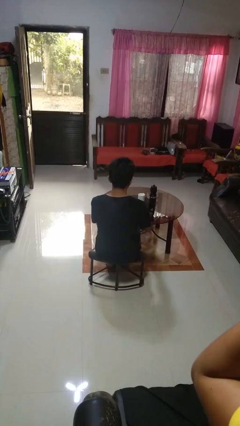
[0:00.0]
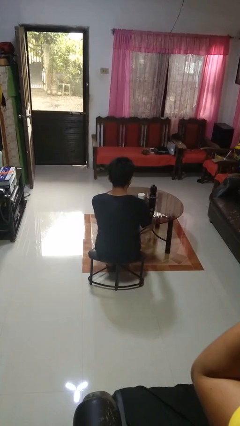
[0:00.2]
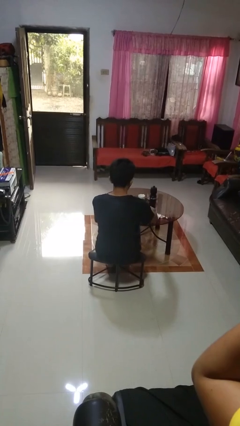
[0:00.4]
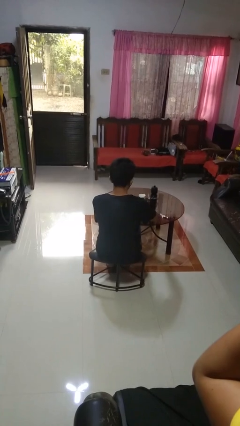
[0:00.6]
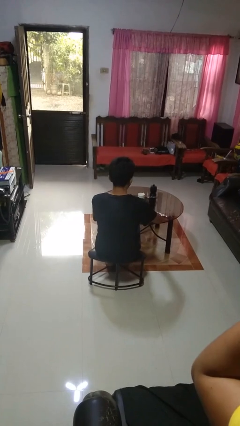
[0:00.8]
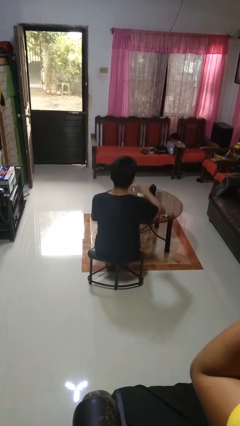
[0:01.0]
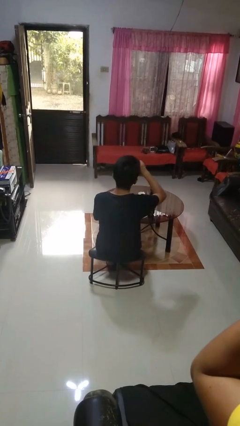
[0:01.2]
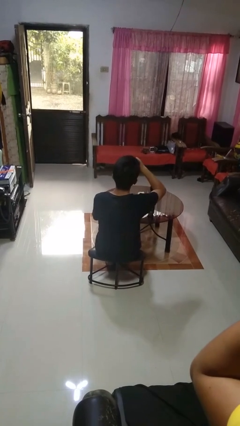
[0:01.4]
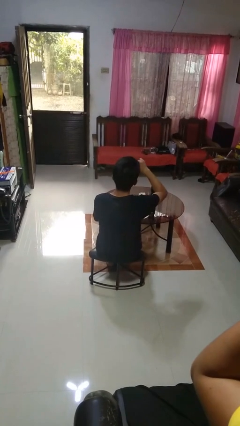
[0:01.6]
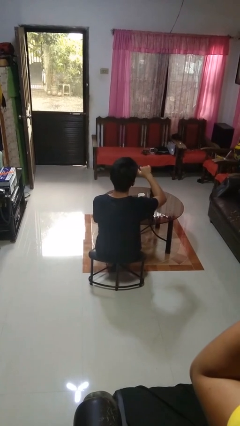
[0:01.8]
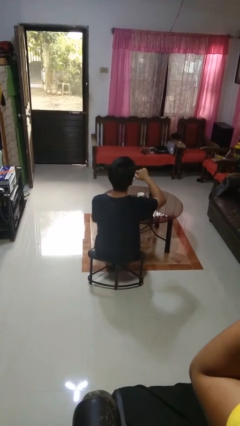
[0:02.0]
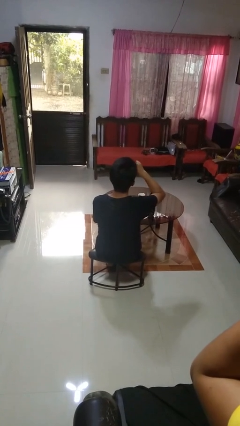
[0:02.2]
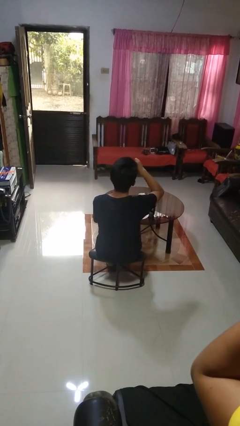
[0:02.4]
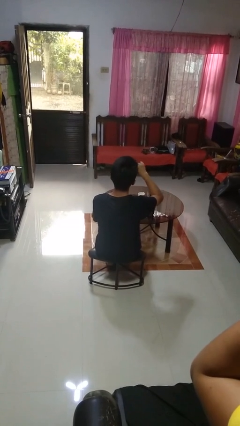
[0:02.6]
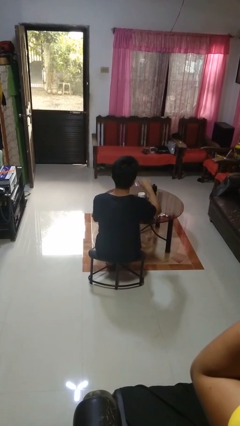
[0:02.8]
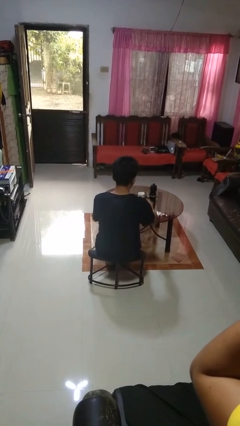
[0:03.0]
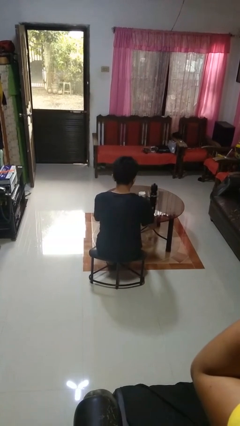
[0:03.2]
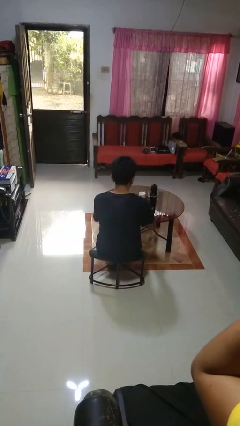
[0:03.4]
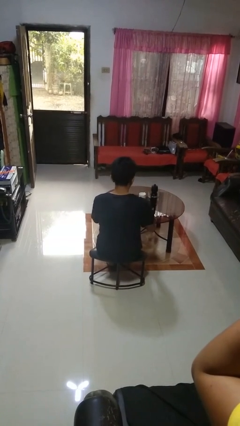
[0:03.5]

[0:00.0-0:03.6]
person eats with utensil

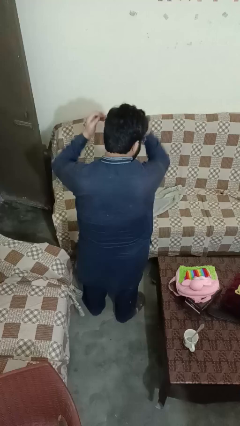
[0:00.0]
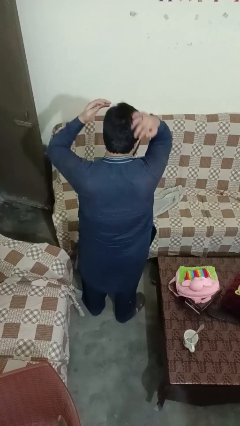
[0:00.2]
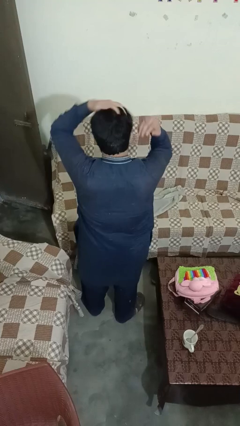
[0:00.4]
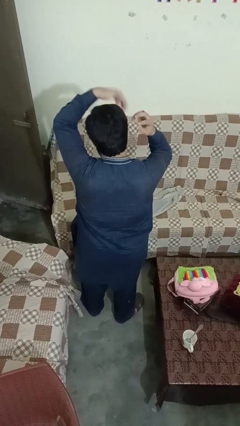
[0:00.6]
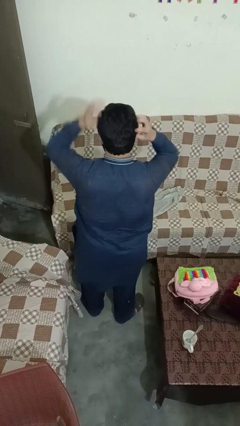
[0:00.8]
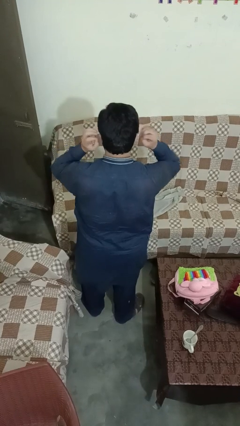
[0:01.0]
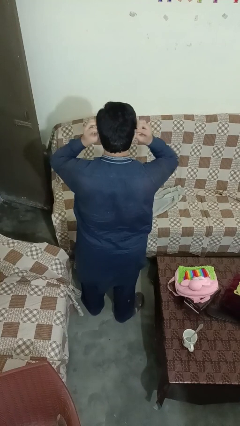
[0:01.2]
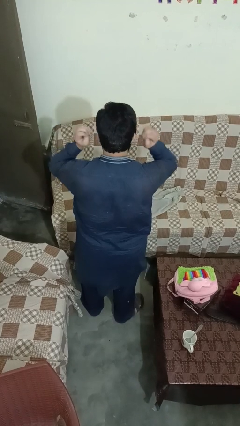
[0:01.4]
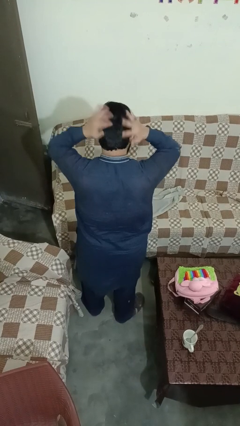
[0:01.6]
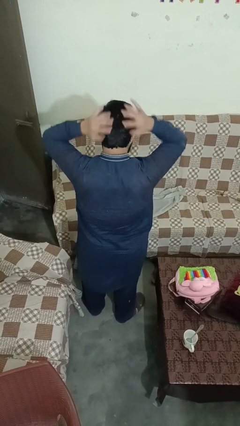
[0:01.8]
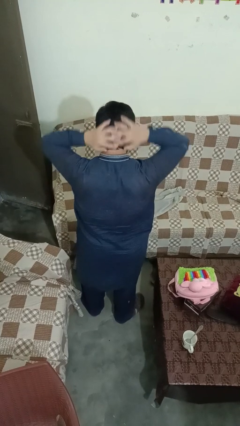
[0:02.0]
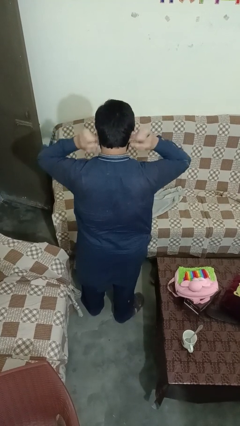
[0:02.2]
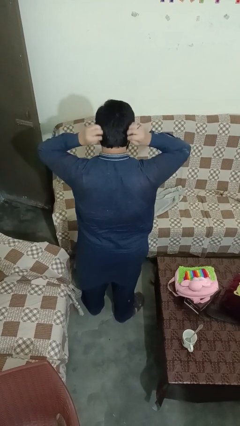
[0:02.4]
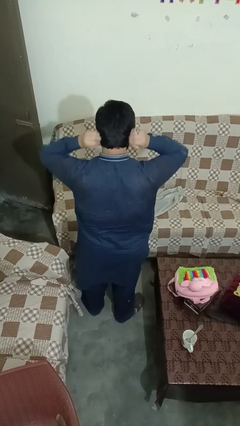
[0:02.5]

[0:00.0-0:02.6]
person strokes hair

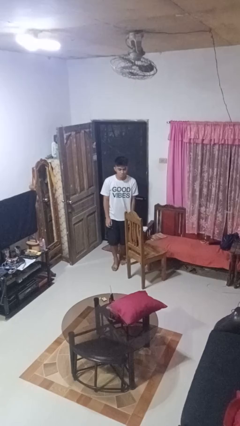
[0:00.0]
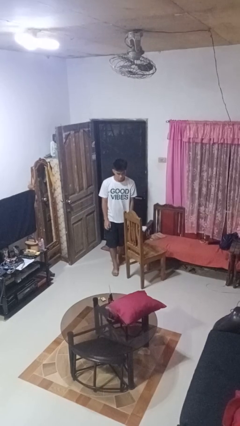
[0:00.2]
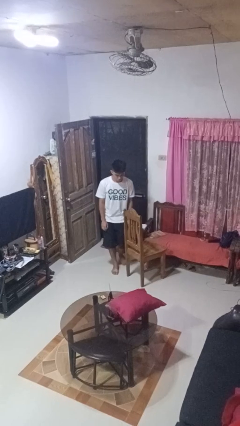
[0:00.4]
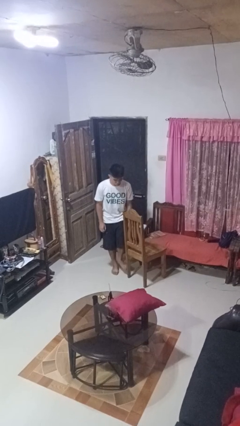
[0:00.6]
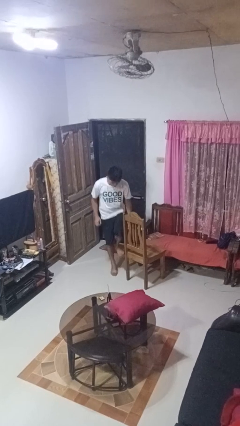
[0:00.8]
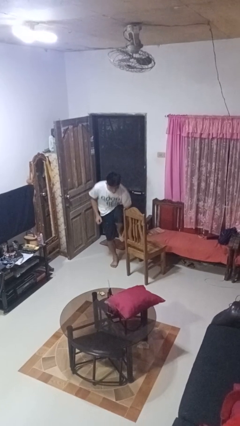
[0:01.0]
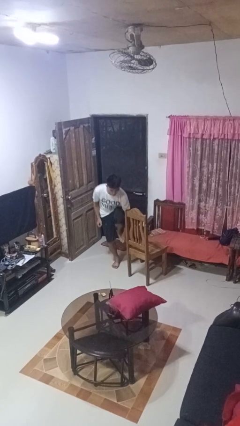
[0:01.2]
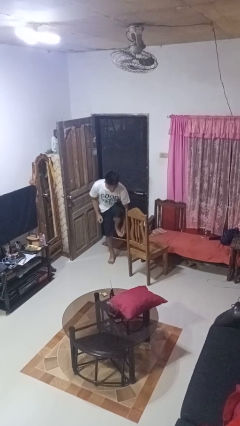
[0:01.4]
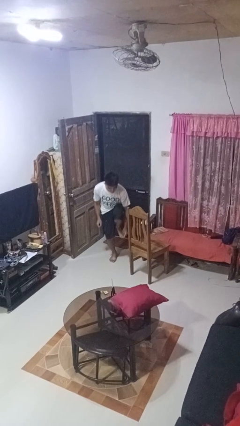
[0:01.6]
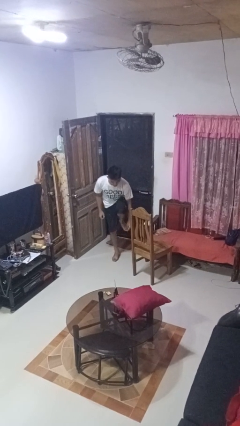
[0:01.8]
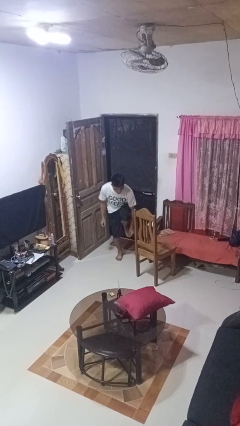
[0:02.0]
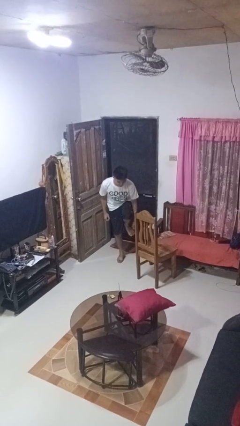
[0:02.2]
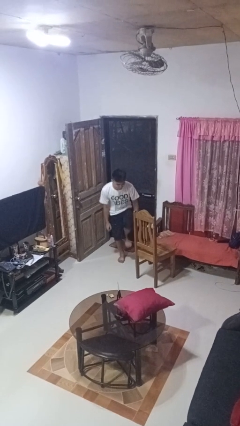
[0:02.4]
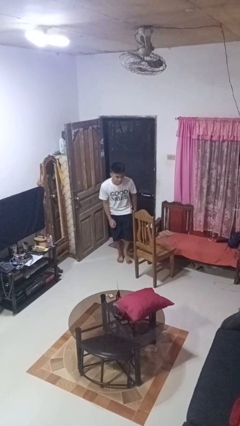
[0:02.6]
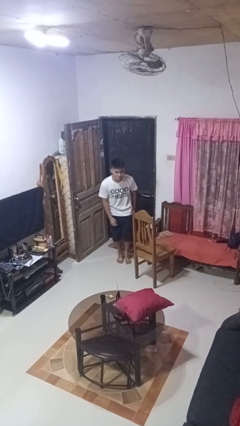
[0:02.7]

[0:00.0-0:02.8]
person stubs toe

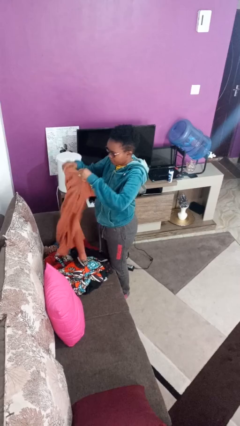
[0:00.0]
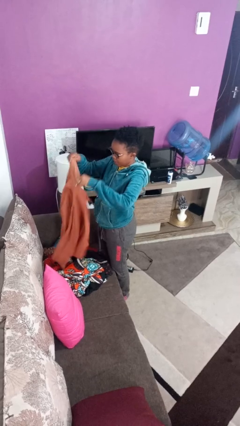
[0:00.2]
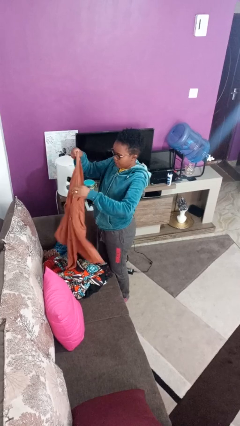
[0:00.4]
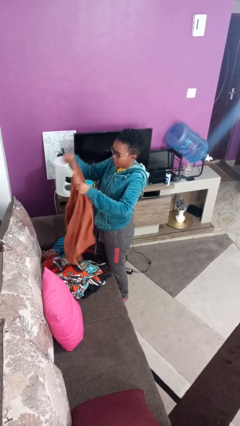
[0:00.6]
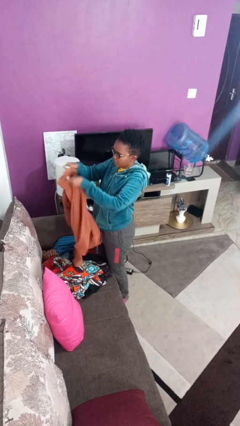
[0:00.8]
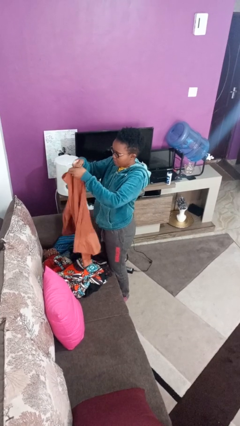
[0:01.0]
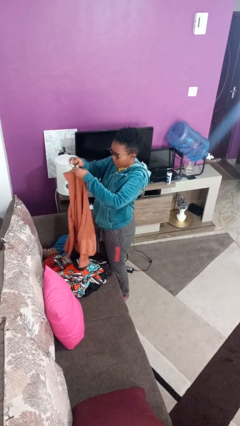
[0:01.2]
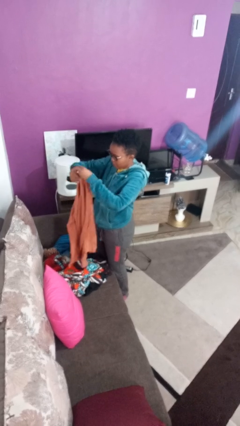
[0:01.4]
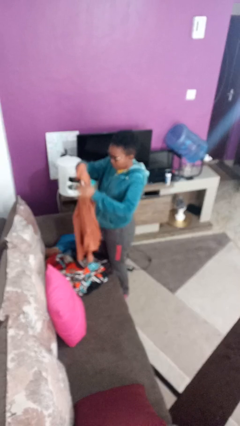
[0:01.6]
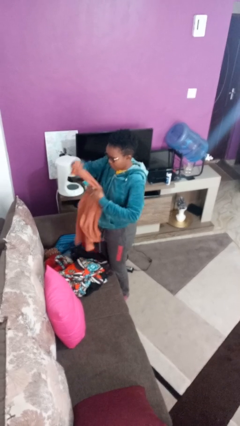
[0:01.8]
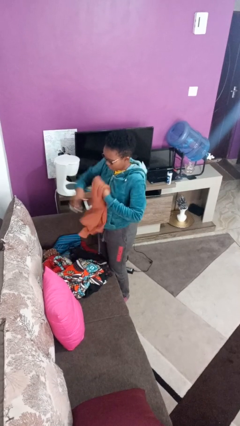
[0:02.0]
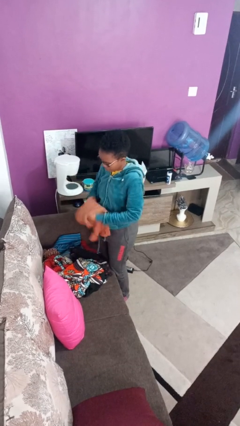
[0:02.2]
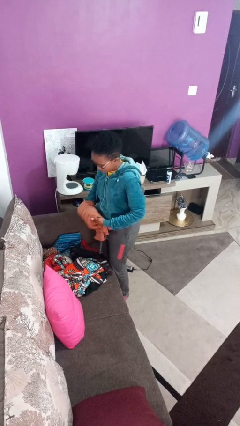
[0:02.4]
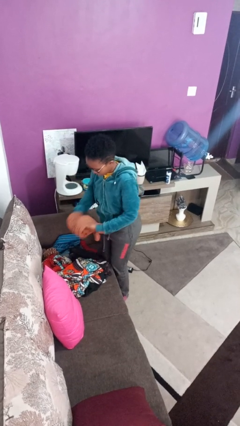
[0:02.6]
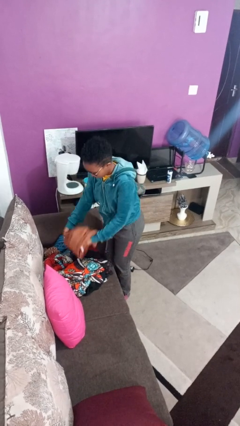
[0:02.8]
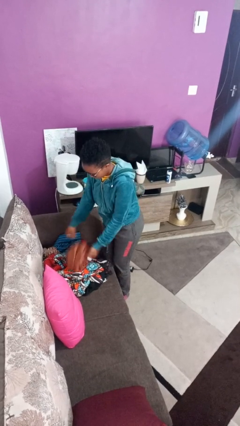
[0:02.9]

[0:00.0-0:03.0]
person folds shirt

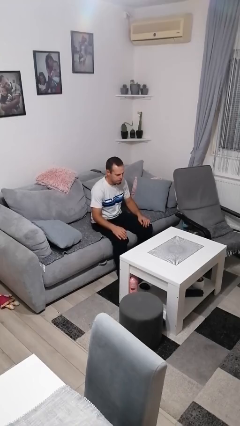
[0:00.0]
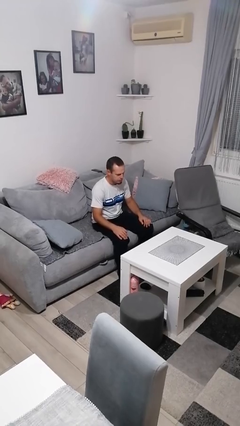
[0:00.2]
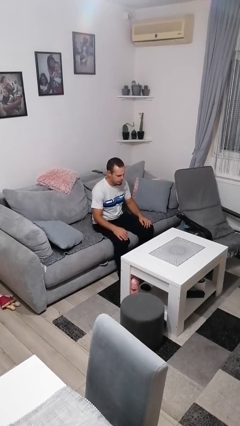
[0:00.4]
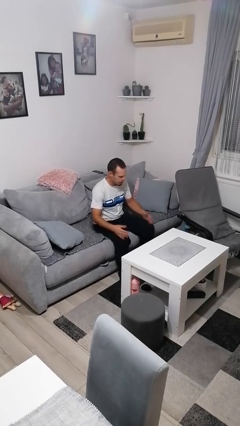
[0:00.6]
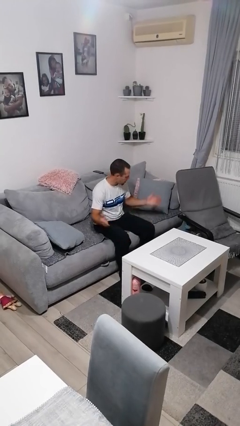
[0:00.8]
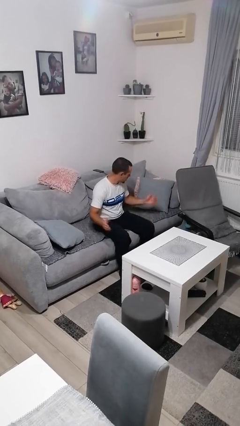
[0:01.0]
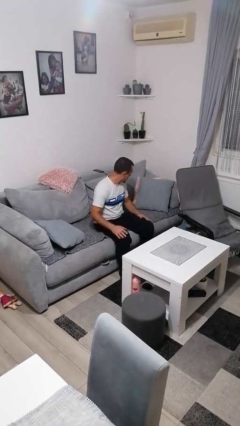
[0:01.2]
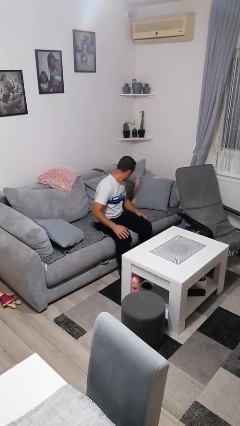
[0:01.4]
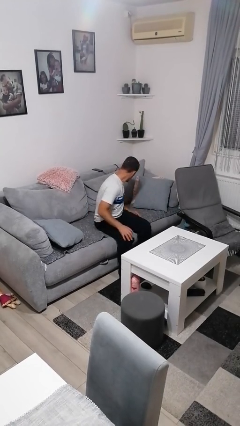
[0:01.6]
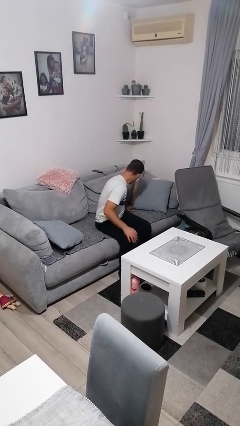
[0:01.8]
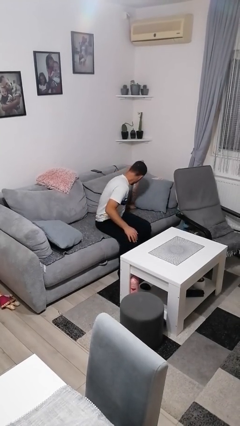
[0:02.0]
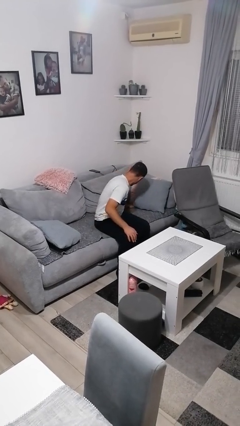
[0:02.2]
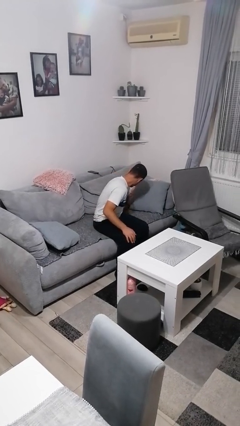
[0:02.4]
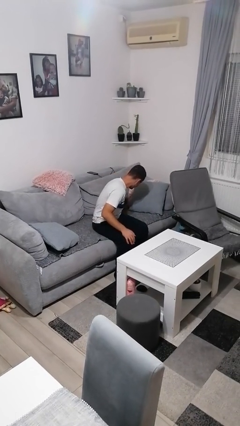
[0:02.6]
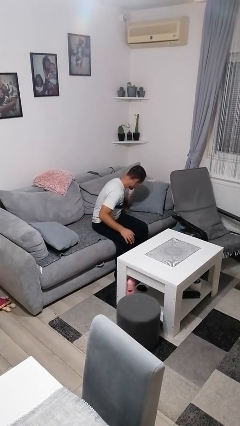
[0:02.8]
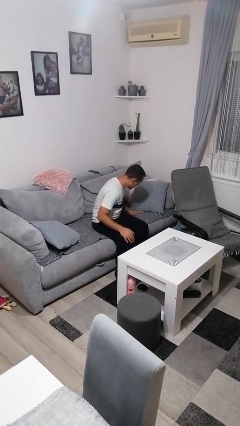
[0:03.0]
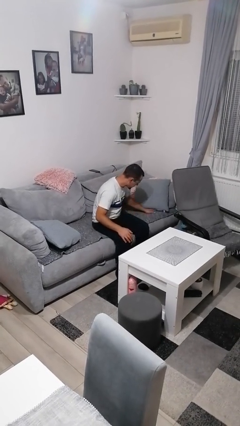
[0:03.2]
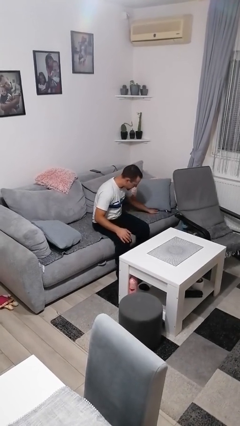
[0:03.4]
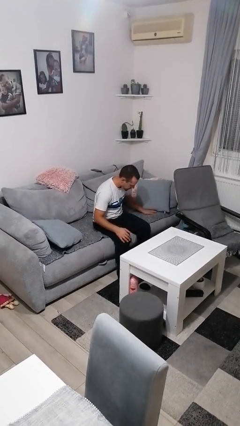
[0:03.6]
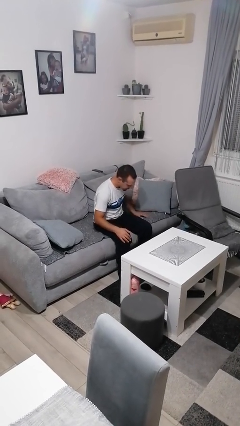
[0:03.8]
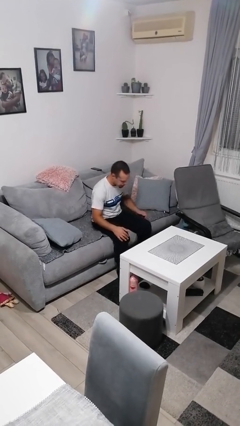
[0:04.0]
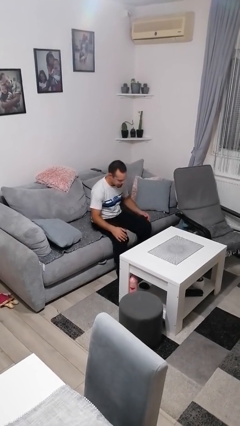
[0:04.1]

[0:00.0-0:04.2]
person searches in couch

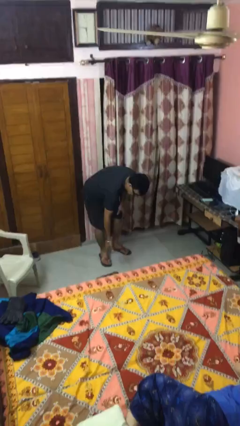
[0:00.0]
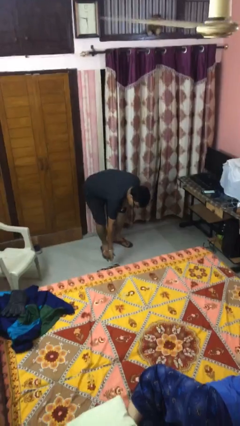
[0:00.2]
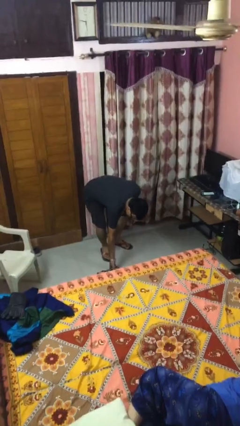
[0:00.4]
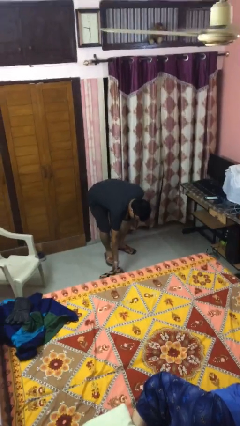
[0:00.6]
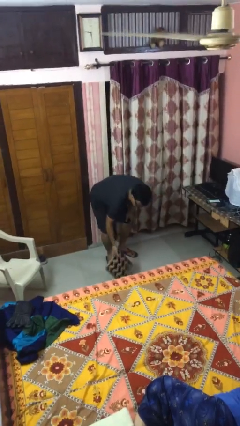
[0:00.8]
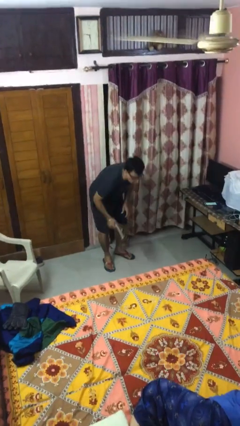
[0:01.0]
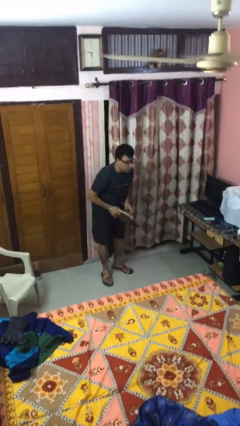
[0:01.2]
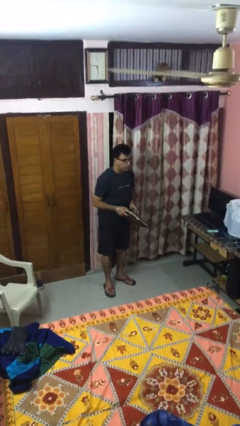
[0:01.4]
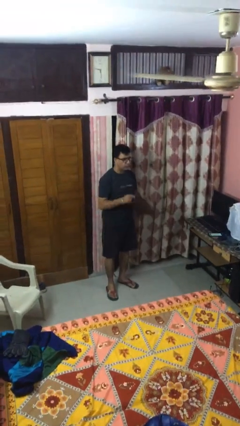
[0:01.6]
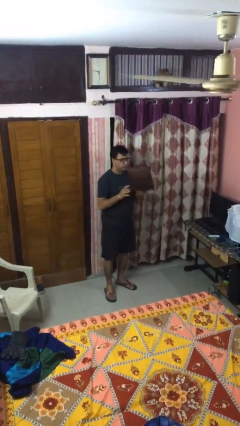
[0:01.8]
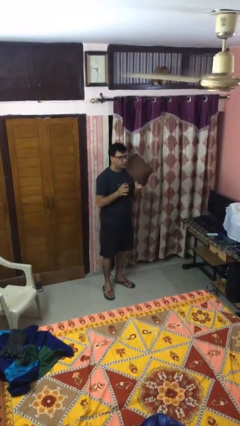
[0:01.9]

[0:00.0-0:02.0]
person picks up object from floor
